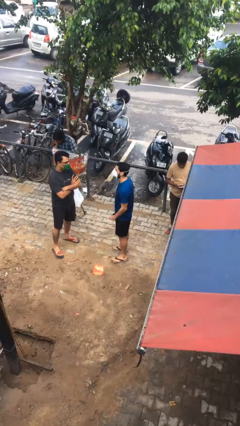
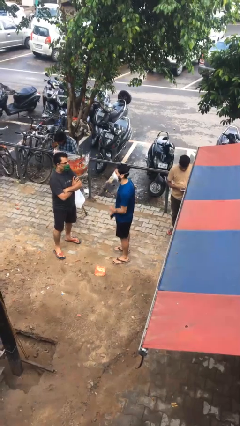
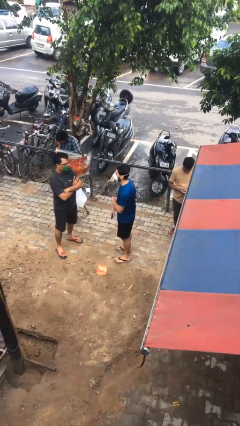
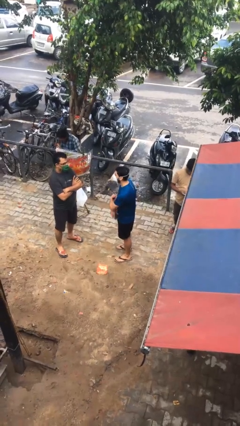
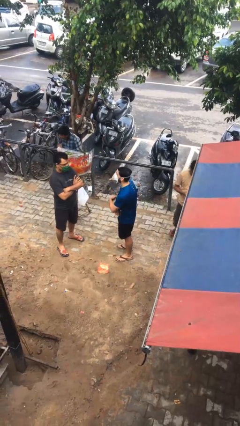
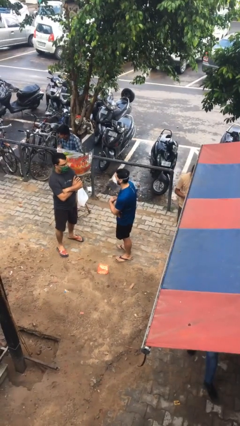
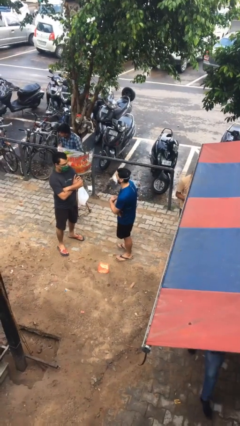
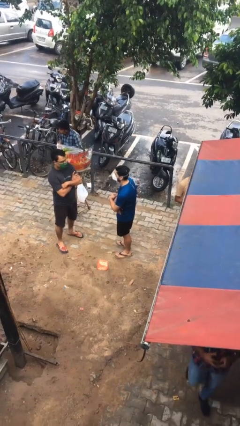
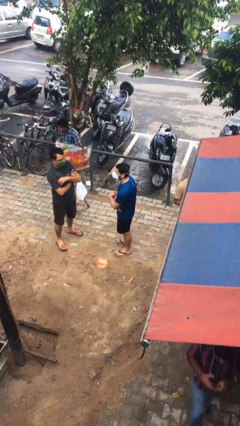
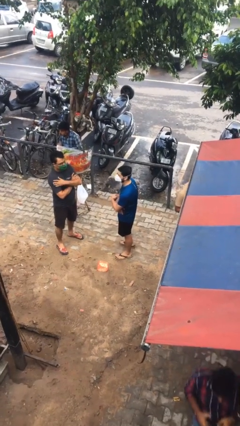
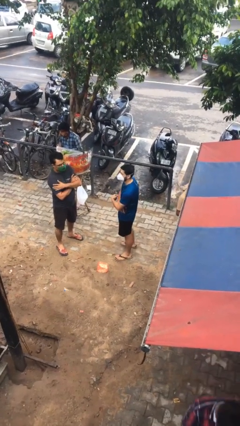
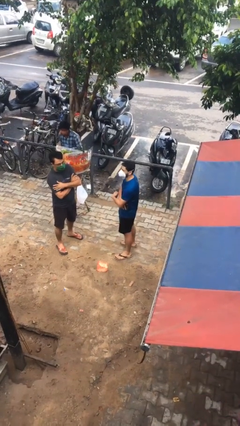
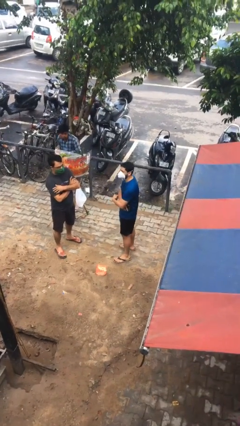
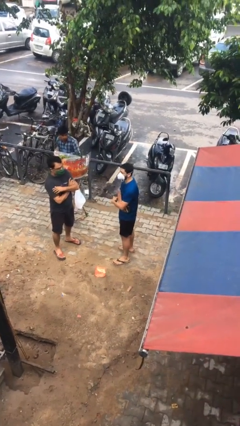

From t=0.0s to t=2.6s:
person talks to person

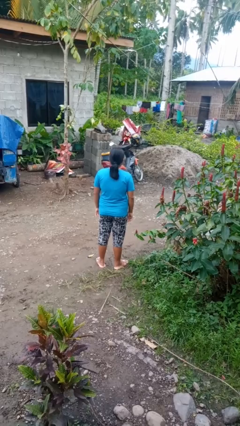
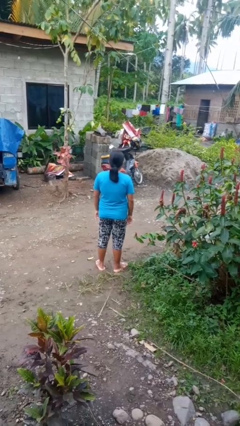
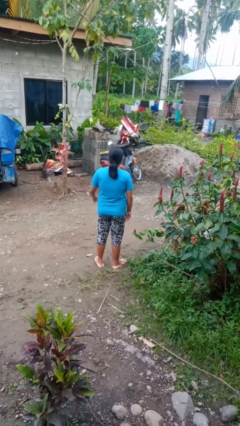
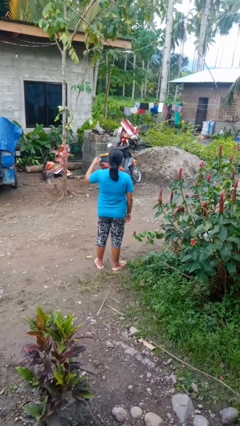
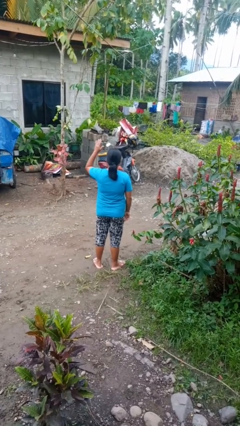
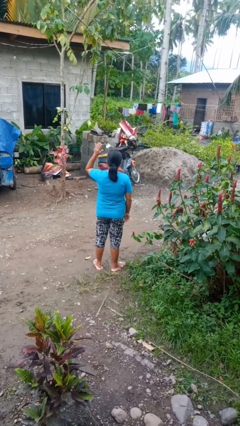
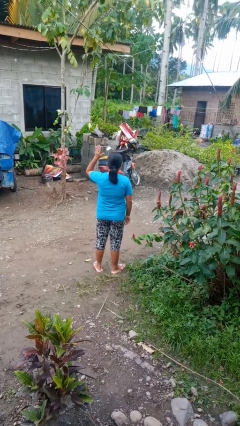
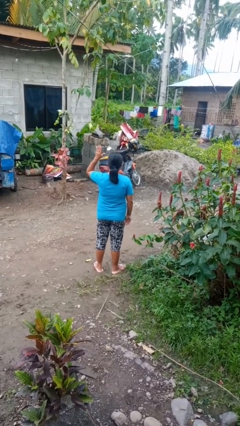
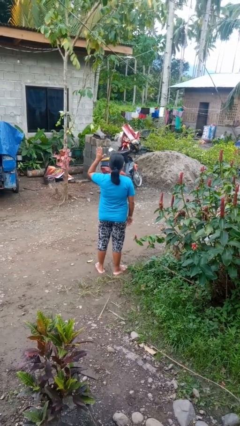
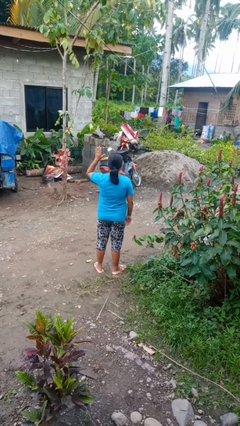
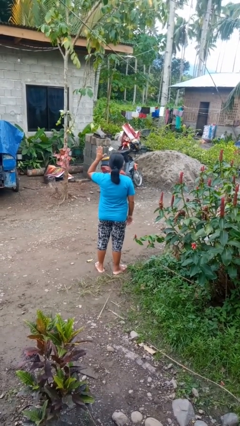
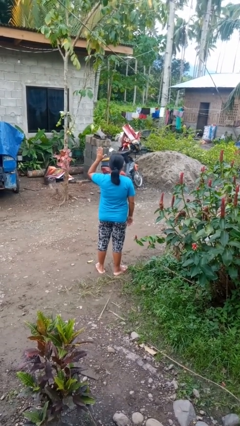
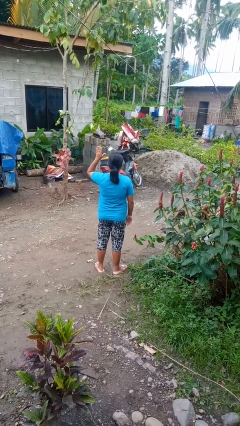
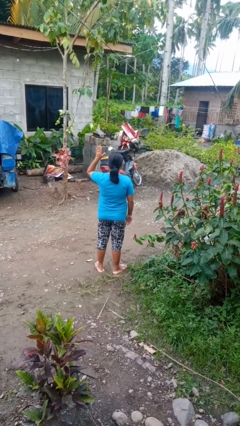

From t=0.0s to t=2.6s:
person gestures raise hand

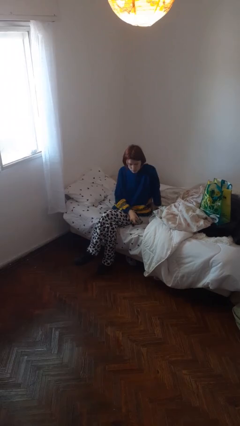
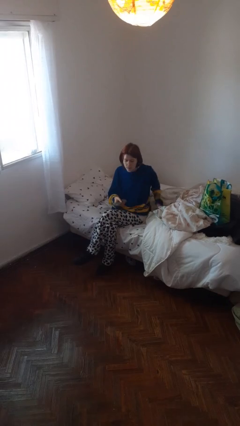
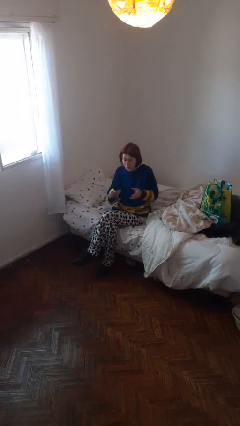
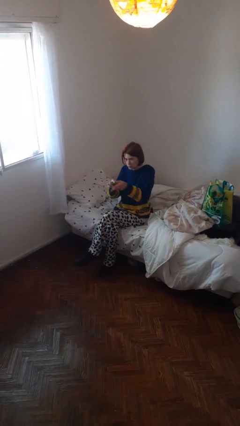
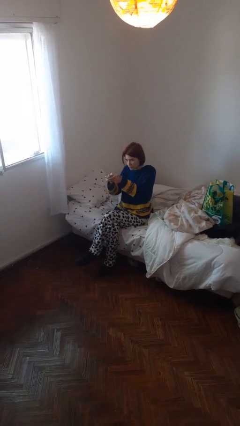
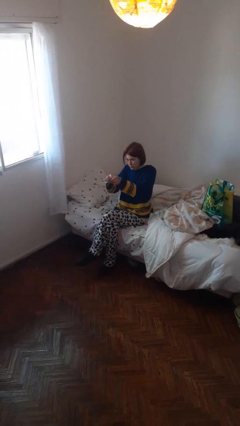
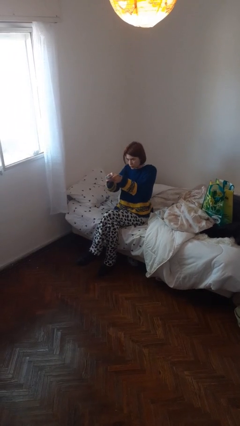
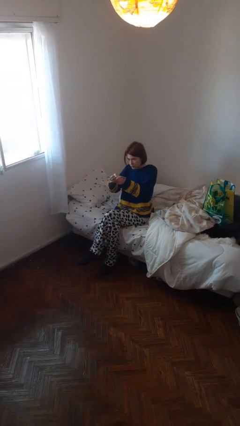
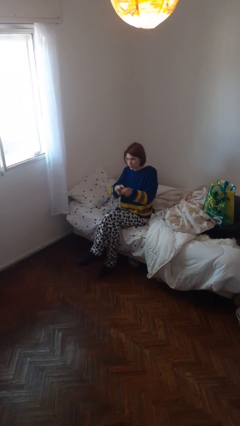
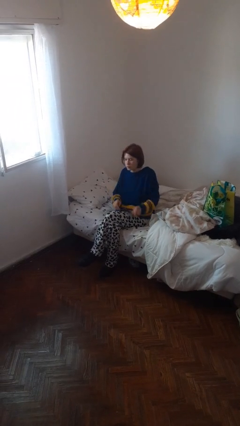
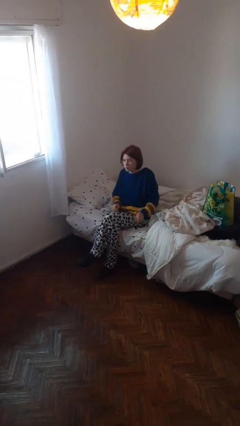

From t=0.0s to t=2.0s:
person uses television remote

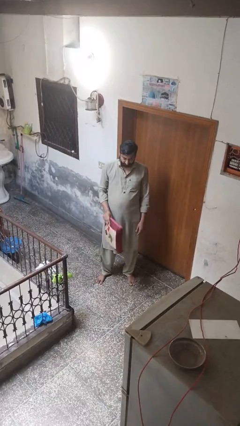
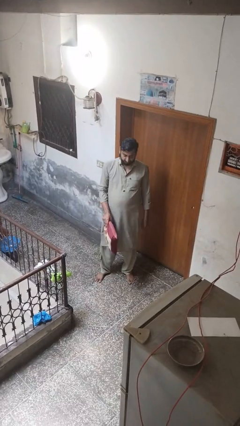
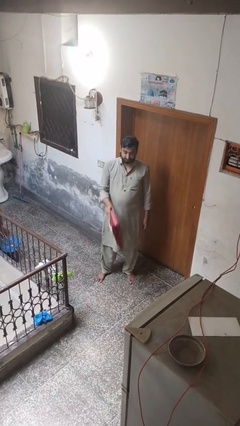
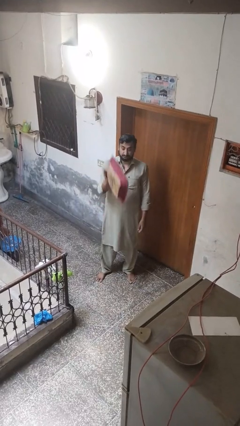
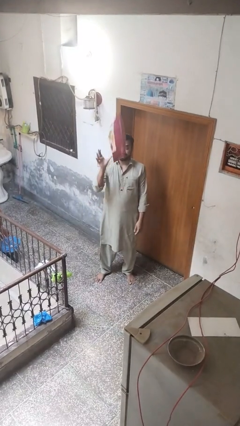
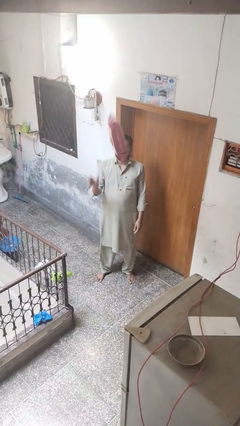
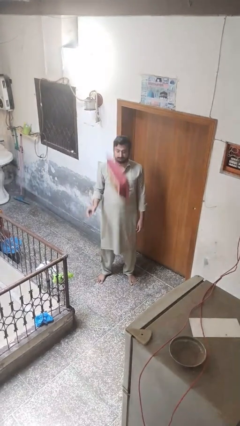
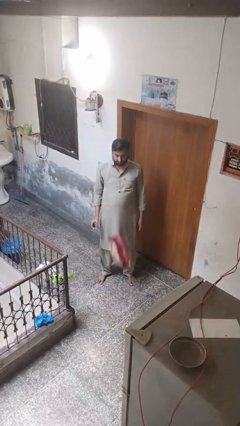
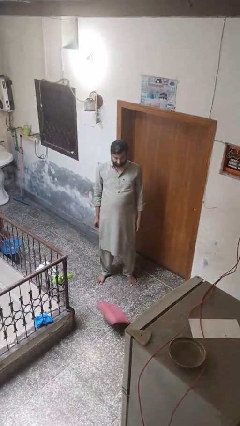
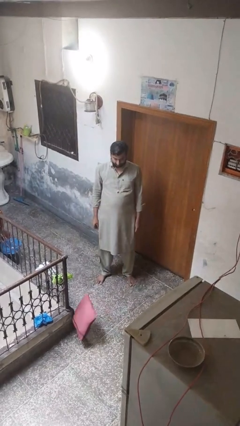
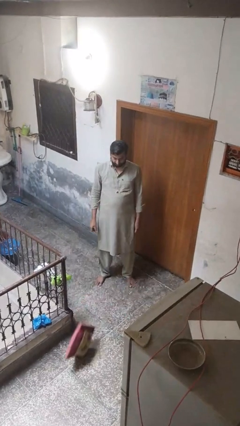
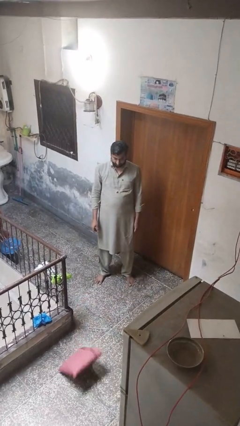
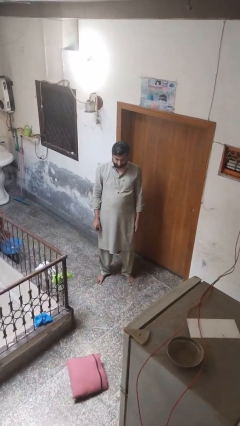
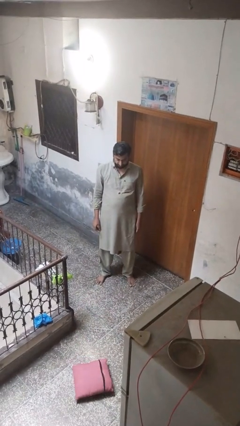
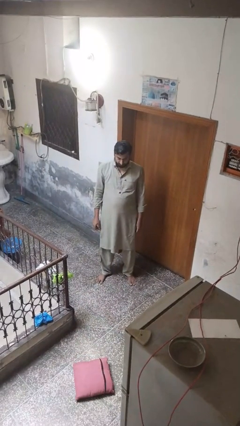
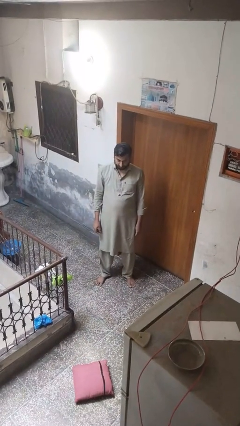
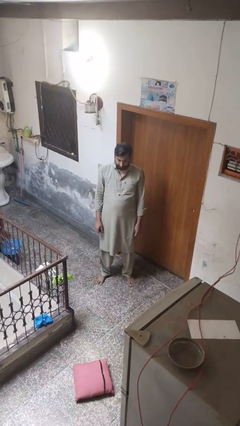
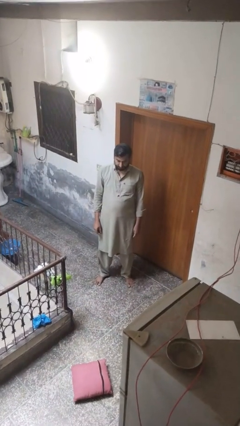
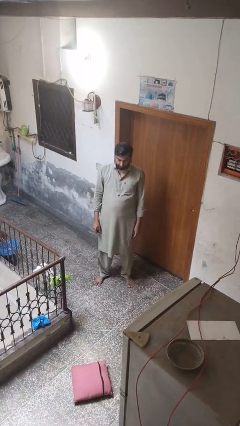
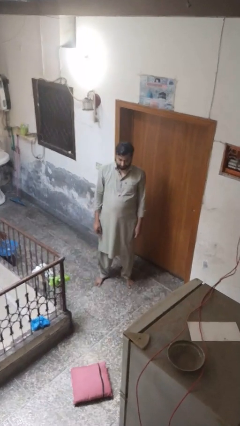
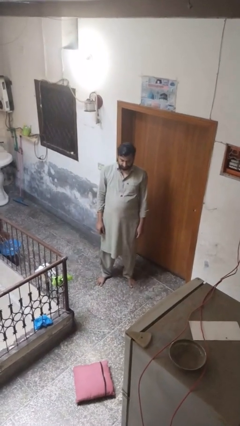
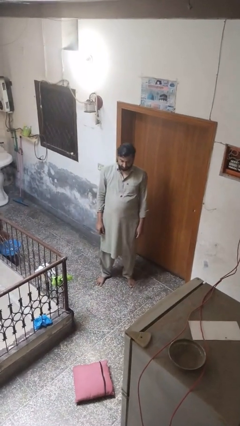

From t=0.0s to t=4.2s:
person throws object into air

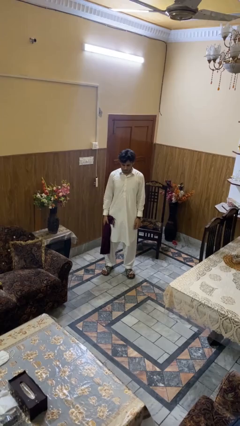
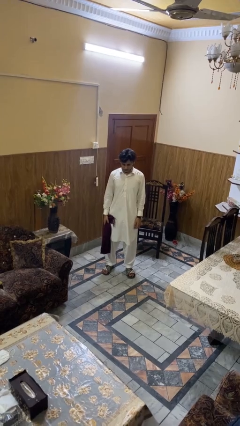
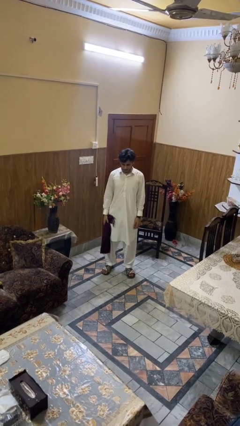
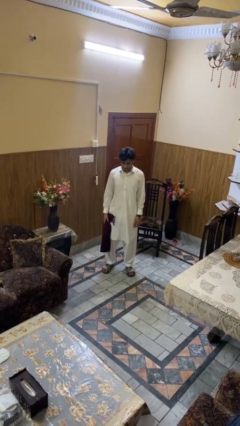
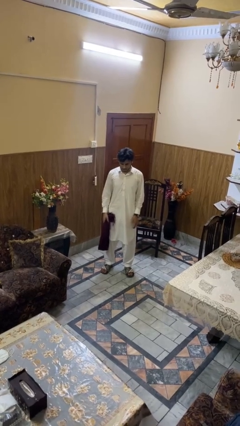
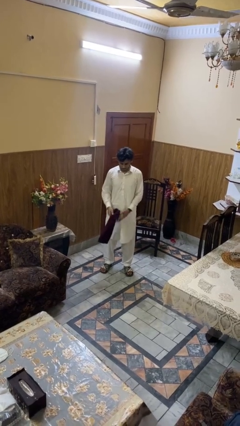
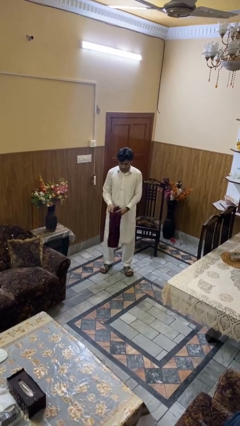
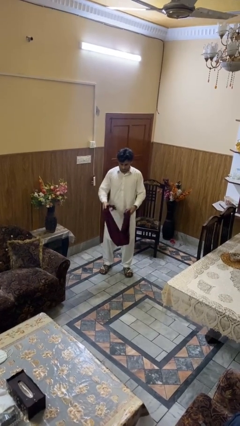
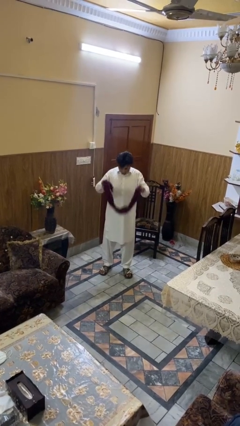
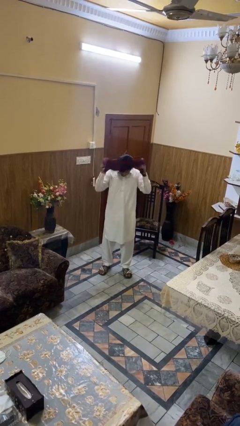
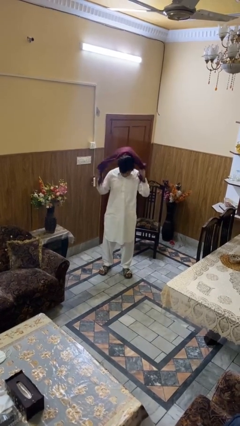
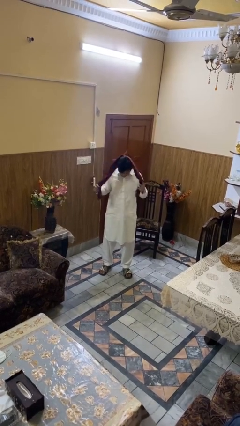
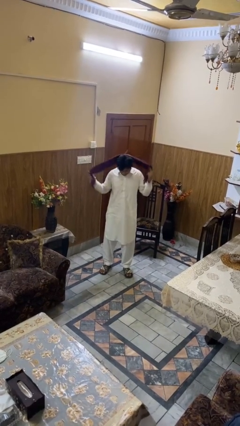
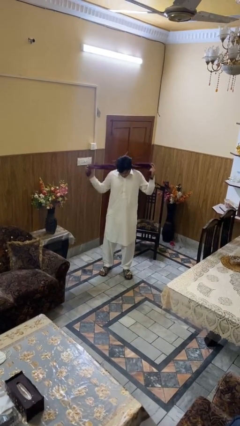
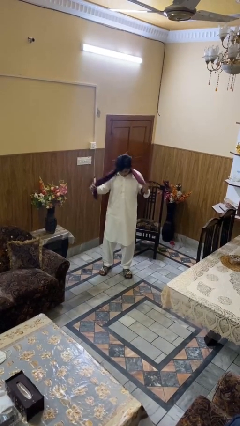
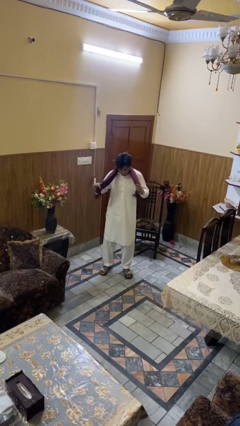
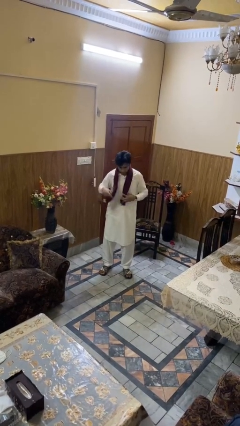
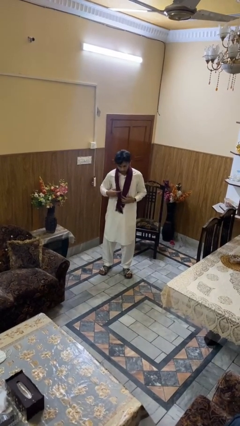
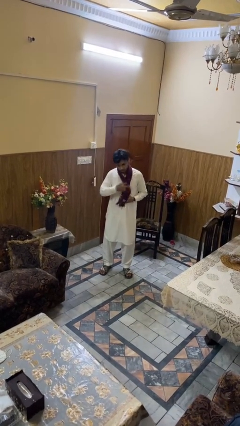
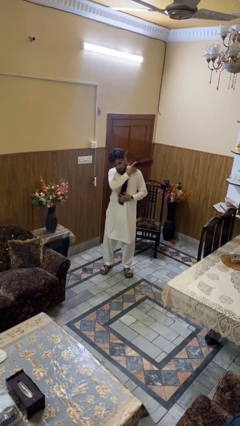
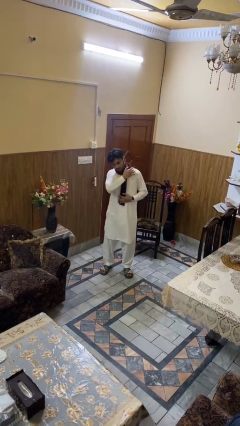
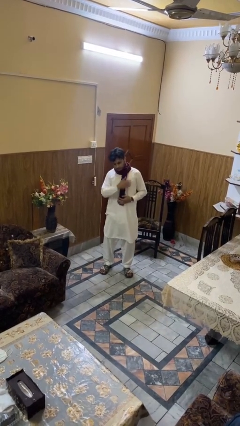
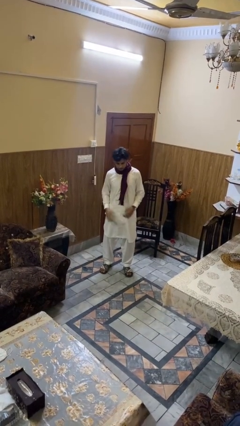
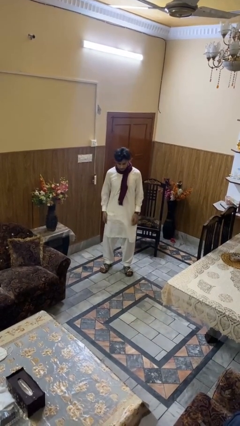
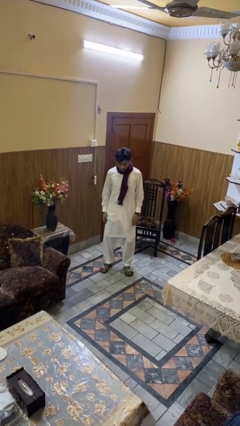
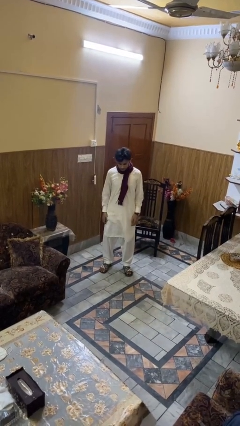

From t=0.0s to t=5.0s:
person puts on scarf

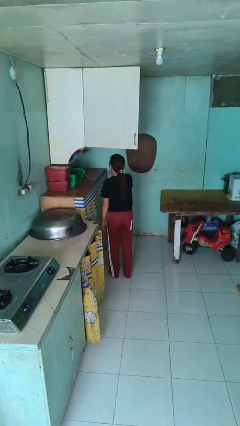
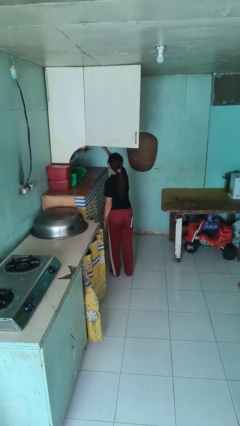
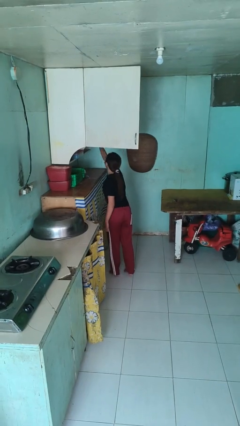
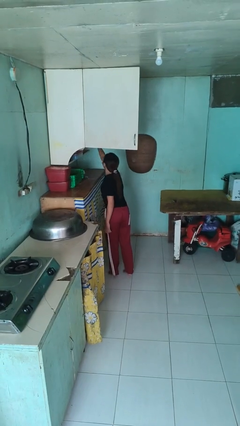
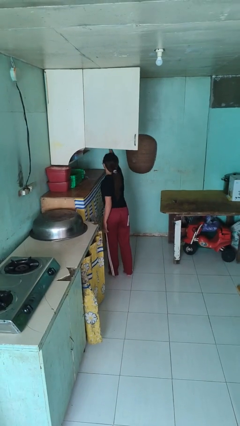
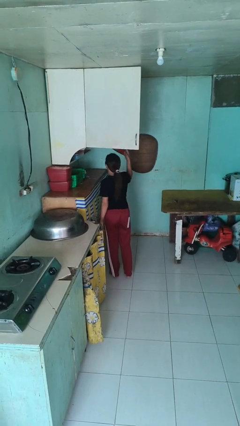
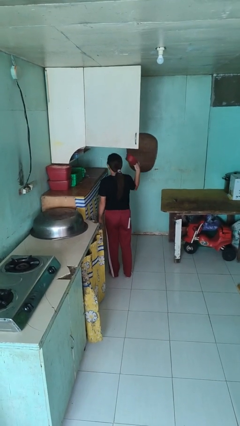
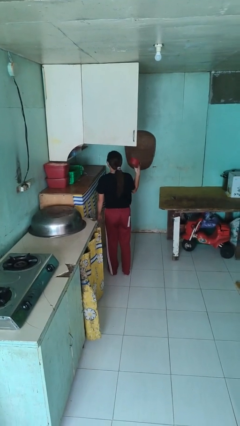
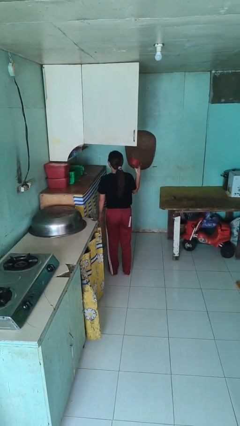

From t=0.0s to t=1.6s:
person takes object from cabinet
